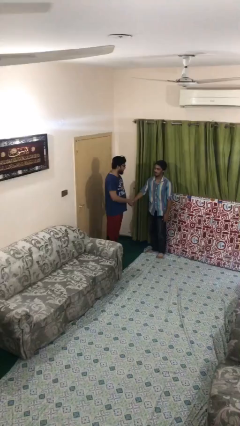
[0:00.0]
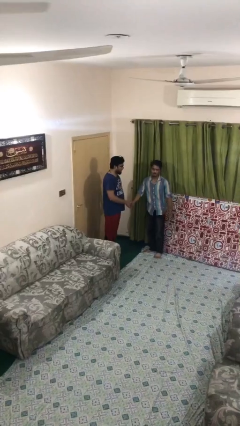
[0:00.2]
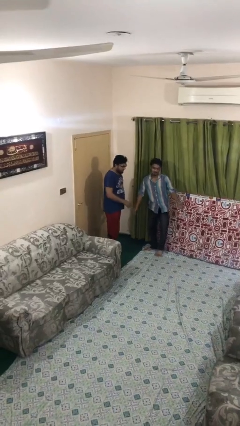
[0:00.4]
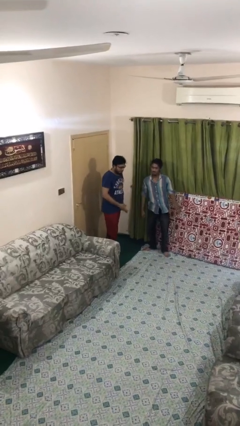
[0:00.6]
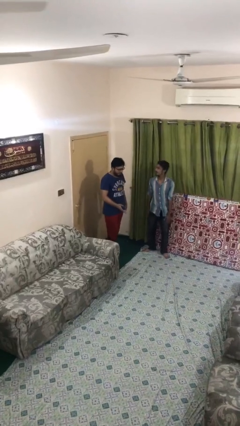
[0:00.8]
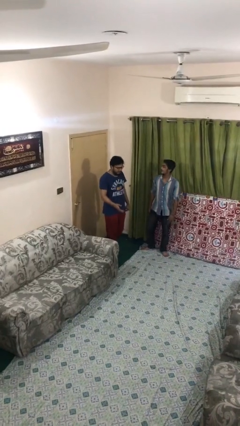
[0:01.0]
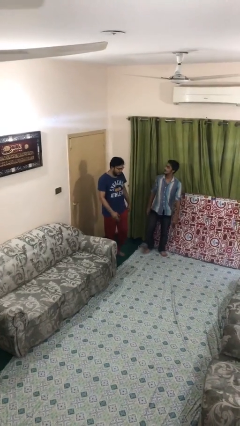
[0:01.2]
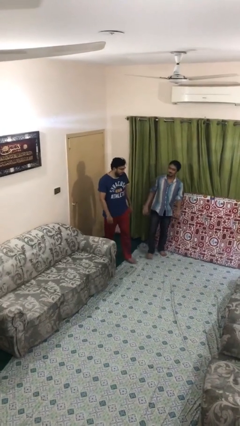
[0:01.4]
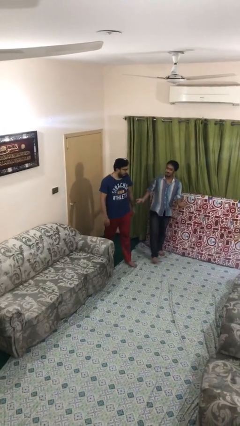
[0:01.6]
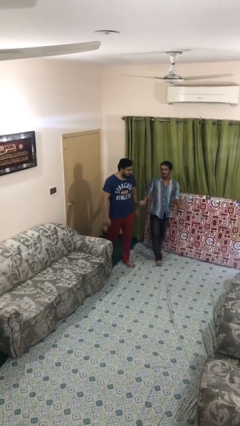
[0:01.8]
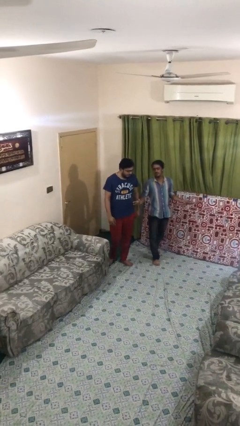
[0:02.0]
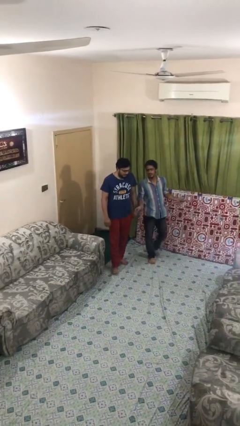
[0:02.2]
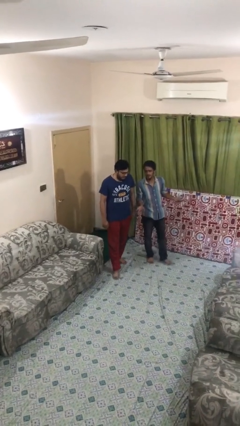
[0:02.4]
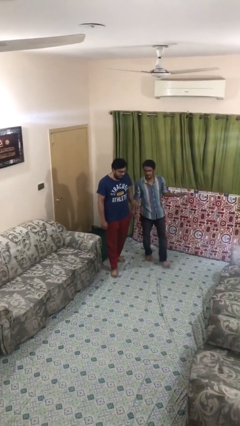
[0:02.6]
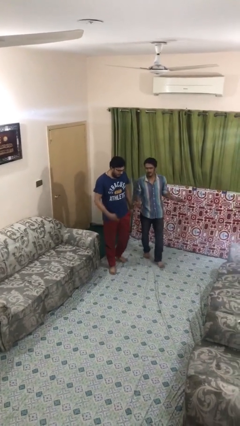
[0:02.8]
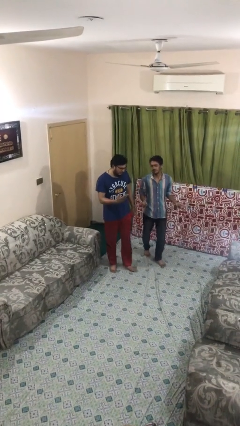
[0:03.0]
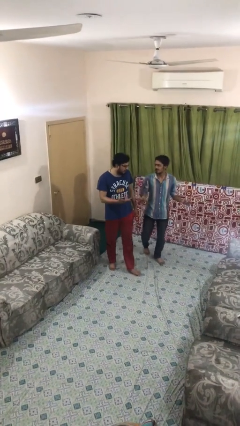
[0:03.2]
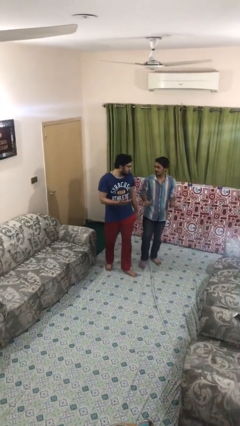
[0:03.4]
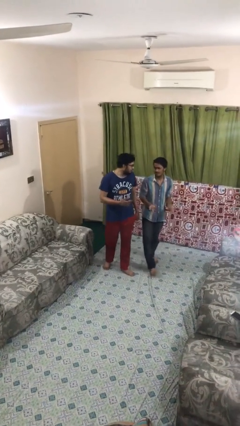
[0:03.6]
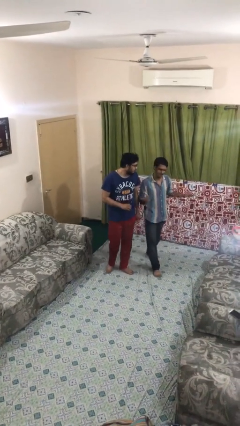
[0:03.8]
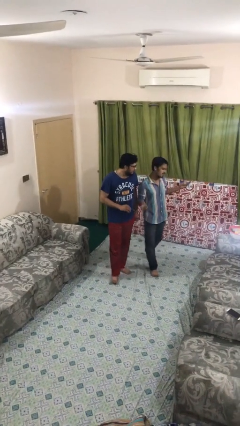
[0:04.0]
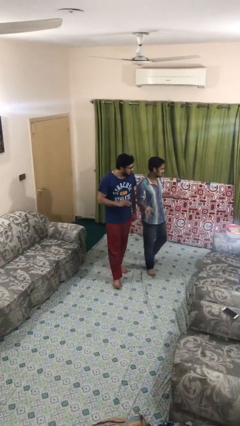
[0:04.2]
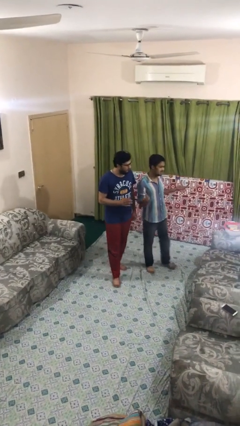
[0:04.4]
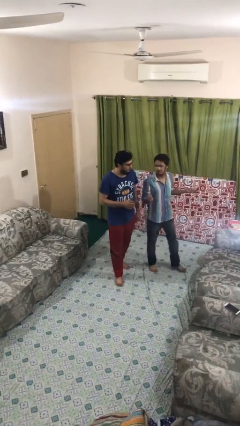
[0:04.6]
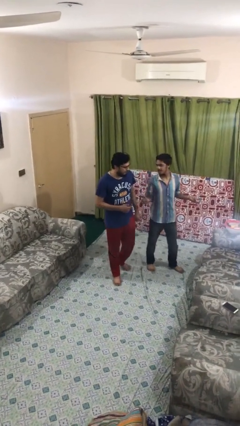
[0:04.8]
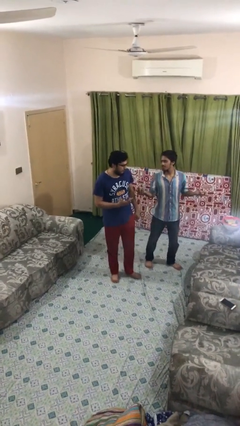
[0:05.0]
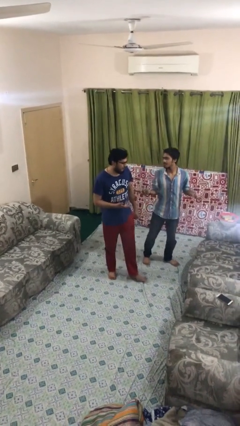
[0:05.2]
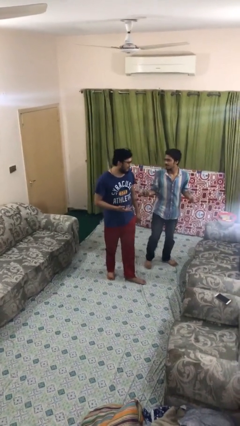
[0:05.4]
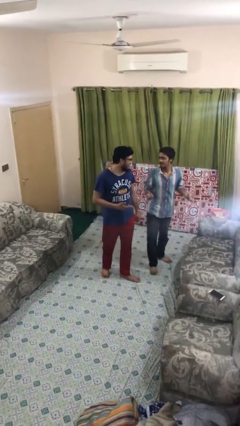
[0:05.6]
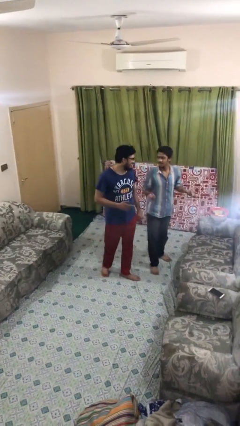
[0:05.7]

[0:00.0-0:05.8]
person talks to person

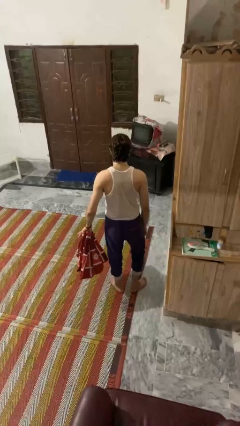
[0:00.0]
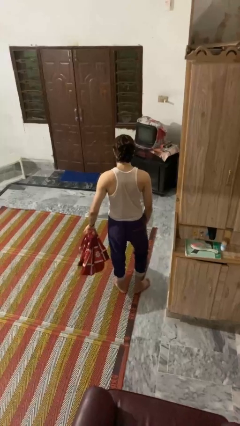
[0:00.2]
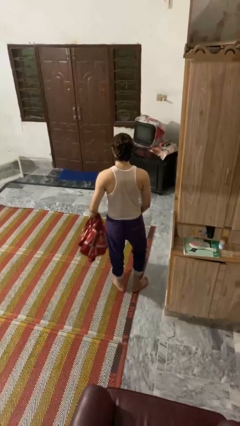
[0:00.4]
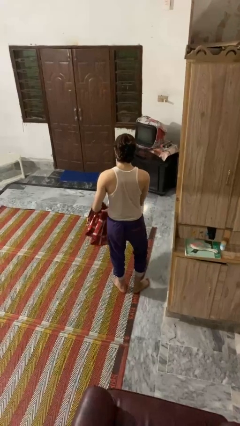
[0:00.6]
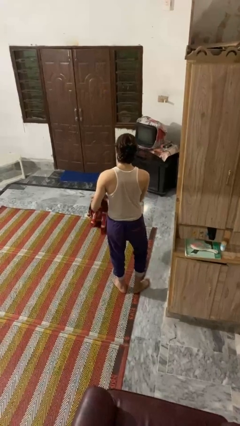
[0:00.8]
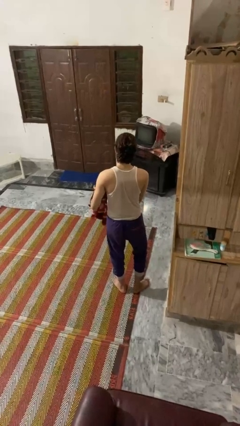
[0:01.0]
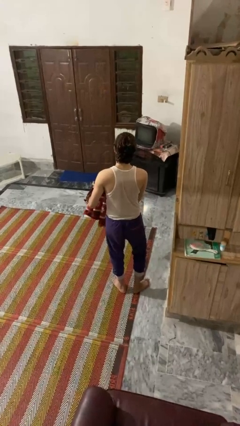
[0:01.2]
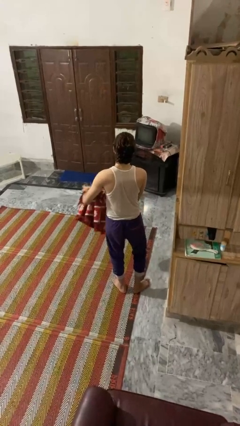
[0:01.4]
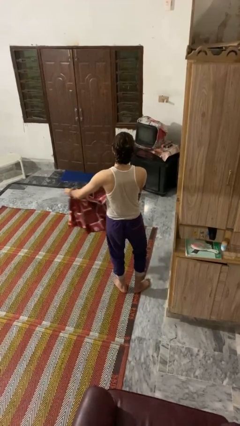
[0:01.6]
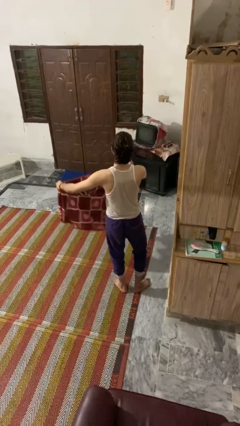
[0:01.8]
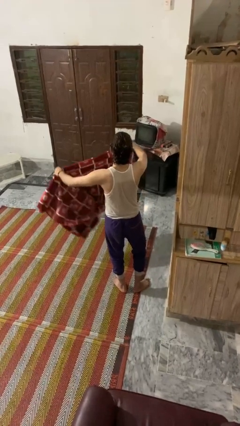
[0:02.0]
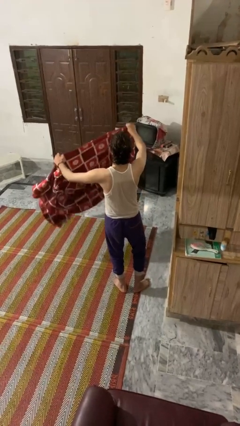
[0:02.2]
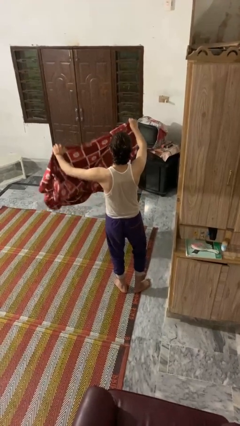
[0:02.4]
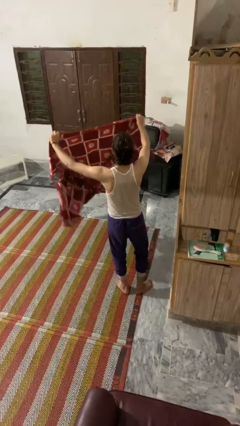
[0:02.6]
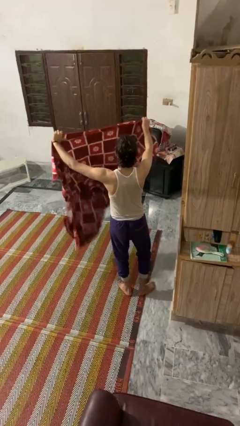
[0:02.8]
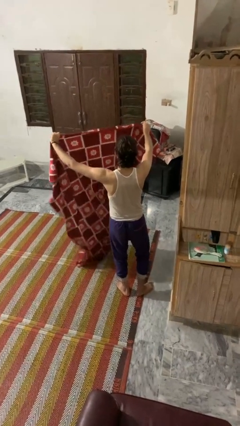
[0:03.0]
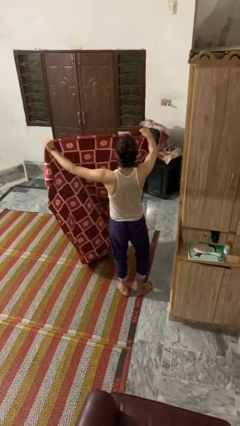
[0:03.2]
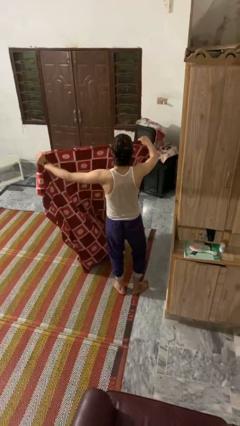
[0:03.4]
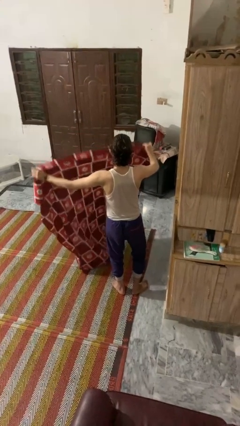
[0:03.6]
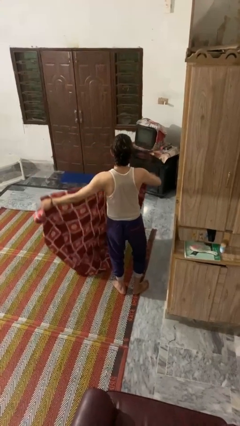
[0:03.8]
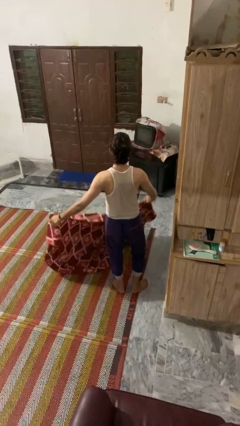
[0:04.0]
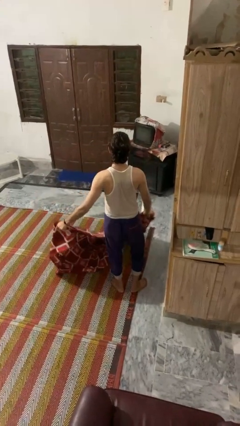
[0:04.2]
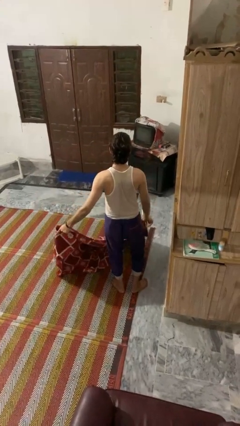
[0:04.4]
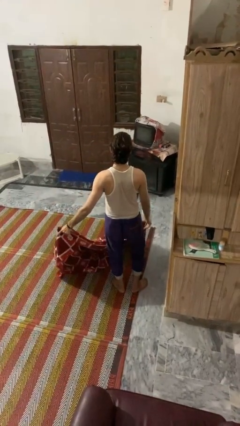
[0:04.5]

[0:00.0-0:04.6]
person unfolds blanket

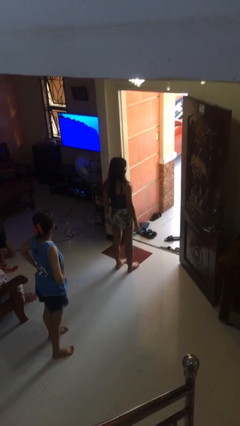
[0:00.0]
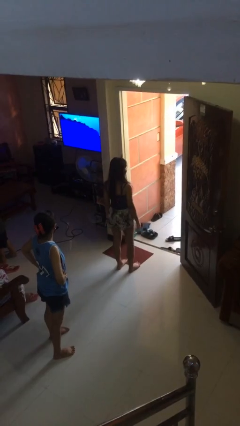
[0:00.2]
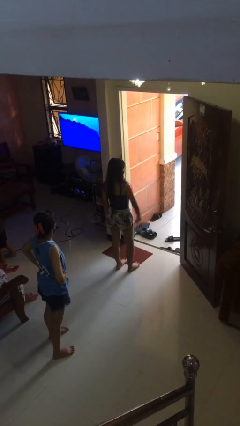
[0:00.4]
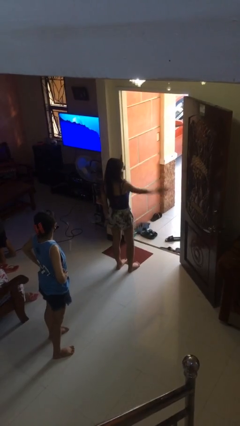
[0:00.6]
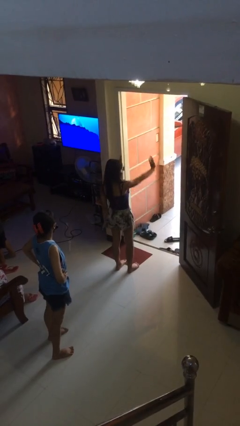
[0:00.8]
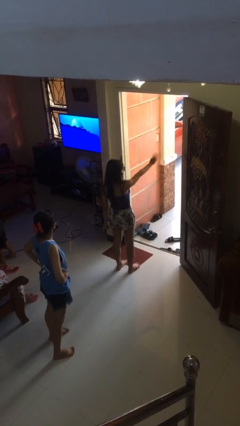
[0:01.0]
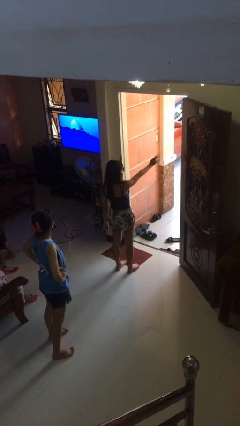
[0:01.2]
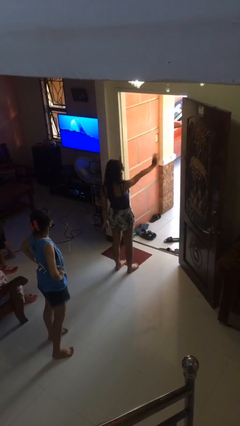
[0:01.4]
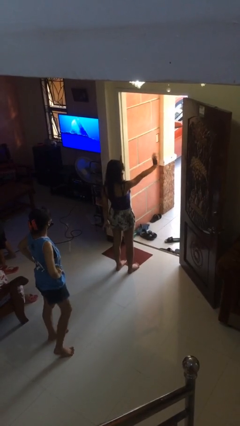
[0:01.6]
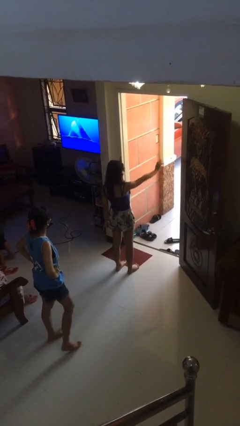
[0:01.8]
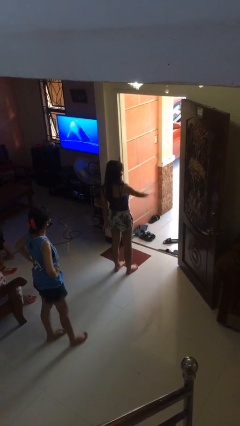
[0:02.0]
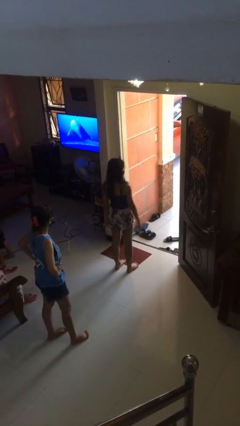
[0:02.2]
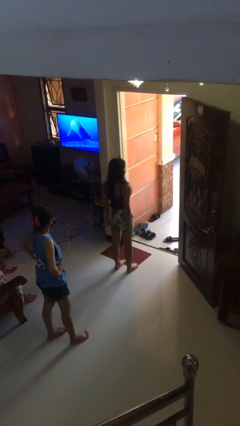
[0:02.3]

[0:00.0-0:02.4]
person waves at person

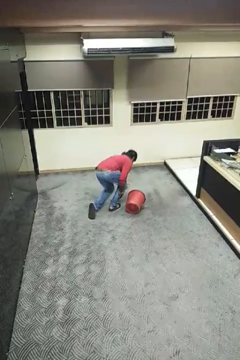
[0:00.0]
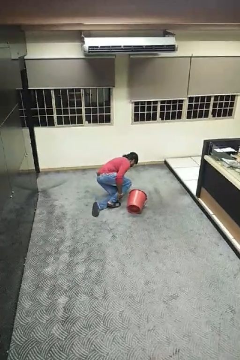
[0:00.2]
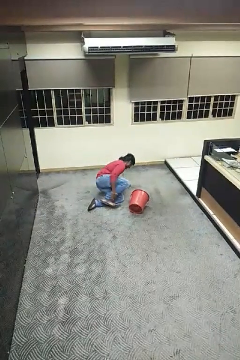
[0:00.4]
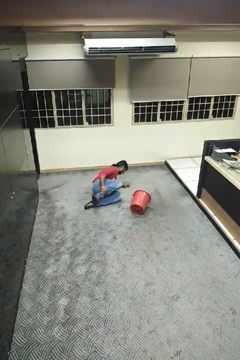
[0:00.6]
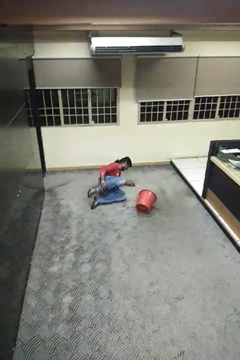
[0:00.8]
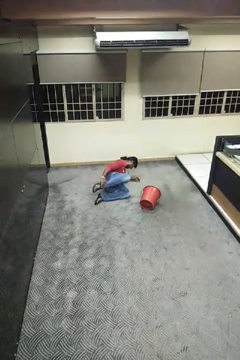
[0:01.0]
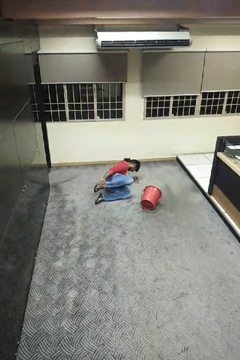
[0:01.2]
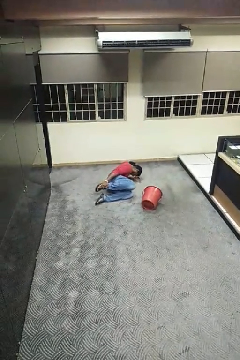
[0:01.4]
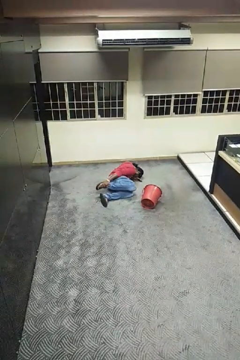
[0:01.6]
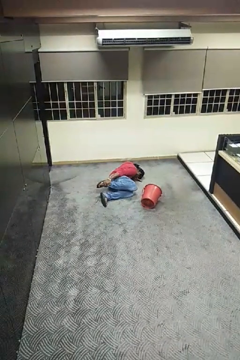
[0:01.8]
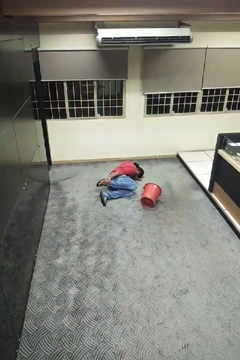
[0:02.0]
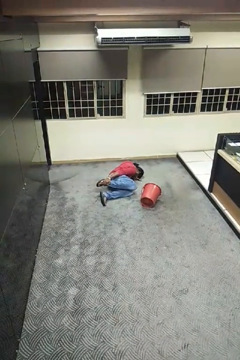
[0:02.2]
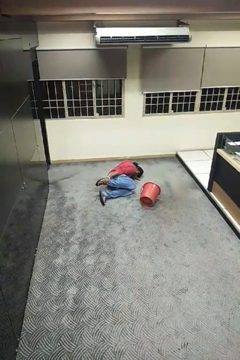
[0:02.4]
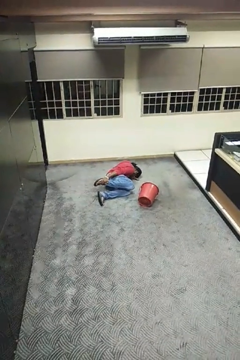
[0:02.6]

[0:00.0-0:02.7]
person lies down on floor

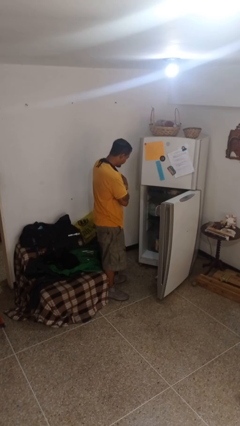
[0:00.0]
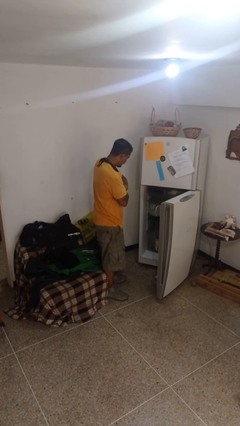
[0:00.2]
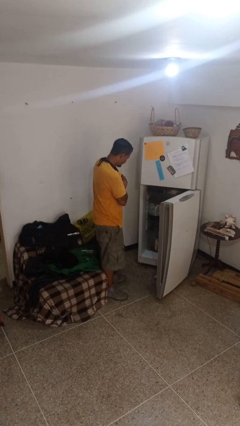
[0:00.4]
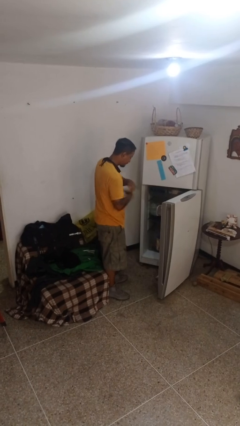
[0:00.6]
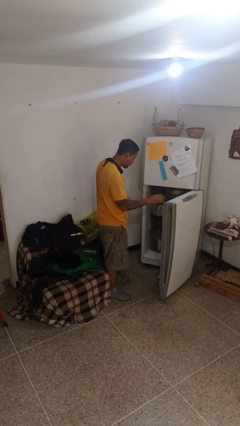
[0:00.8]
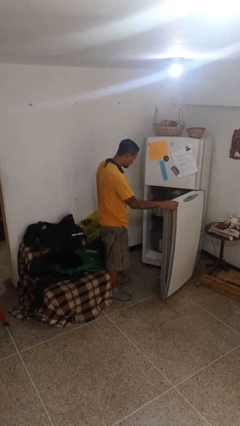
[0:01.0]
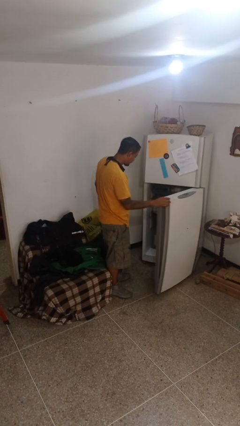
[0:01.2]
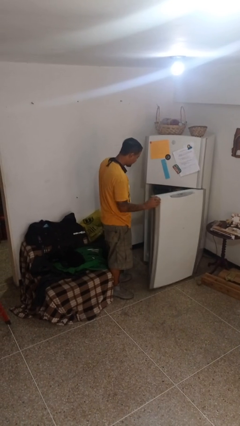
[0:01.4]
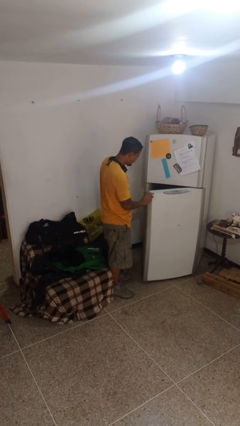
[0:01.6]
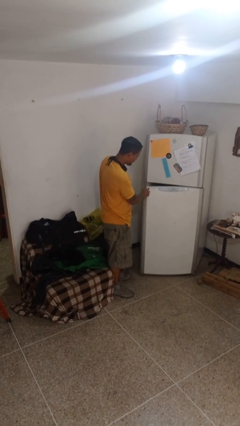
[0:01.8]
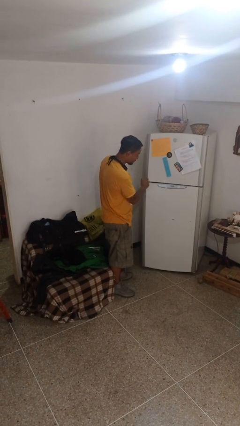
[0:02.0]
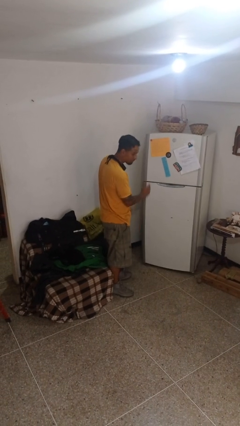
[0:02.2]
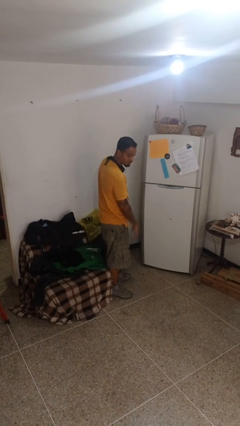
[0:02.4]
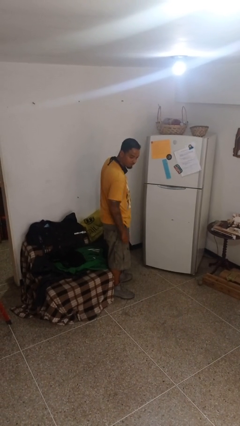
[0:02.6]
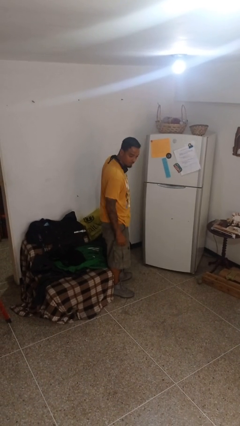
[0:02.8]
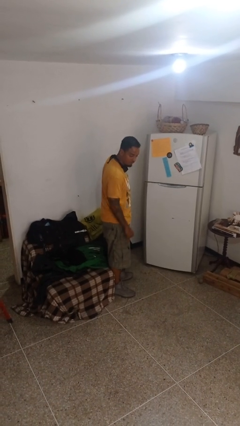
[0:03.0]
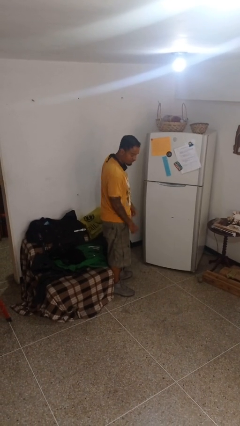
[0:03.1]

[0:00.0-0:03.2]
person closes refrigerator
